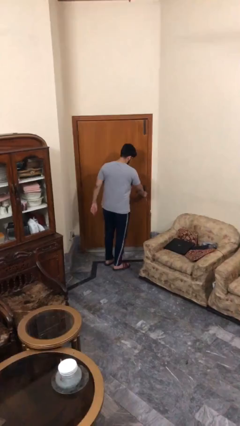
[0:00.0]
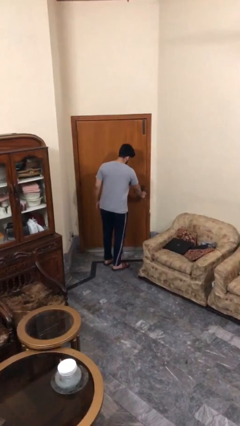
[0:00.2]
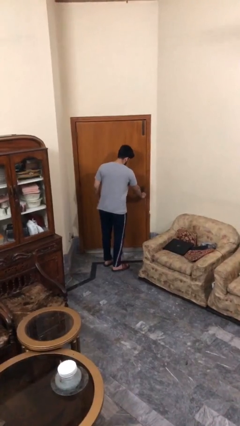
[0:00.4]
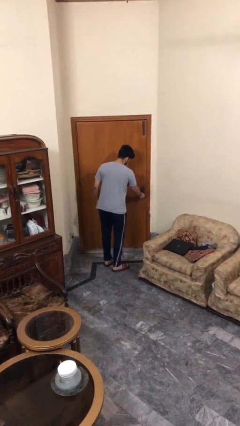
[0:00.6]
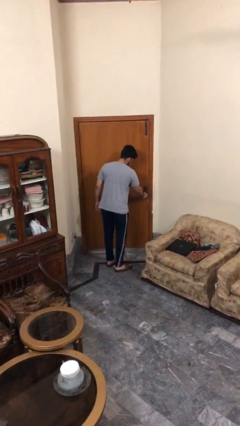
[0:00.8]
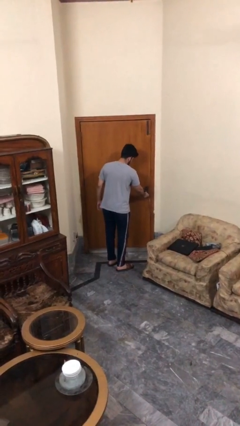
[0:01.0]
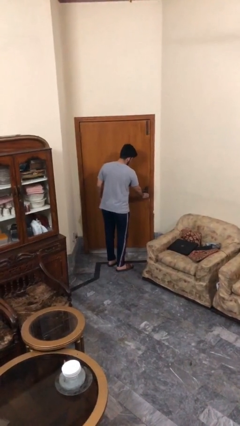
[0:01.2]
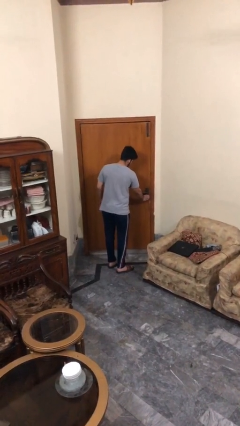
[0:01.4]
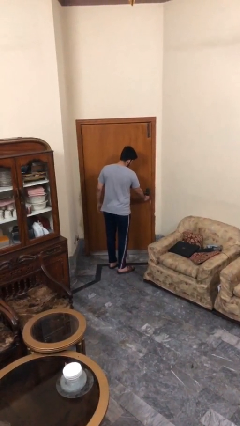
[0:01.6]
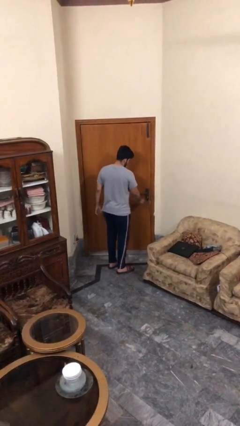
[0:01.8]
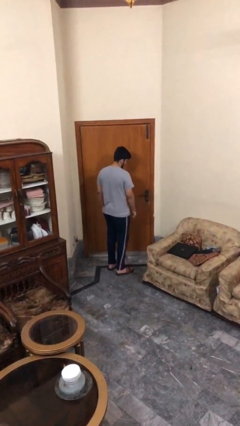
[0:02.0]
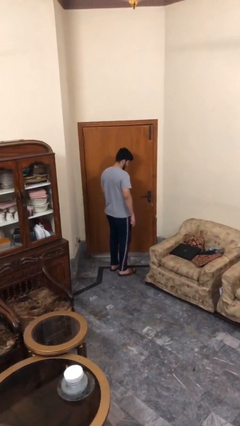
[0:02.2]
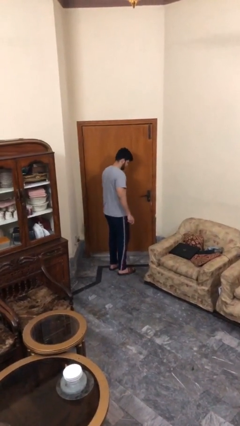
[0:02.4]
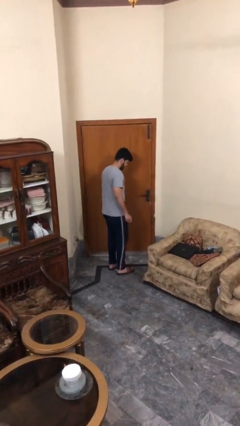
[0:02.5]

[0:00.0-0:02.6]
person locks door with keys

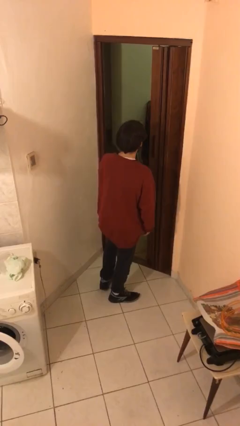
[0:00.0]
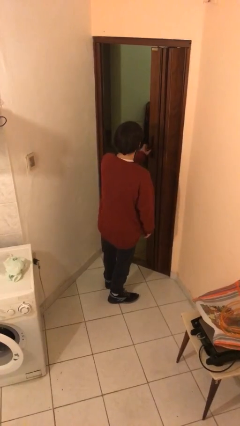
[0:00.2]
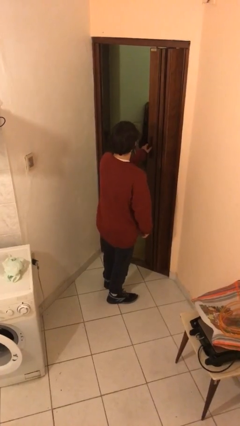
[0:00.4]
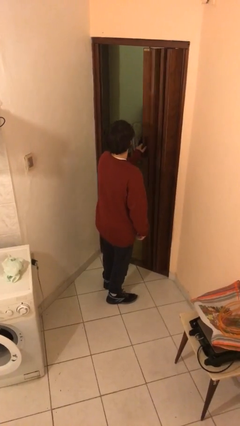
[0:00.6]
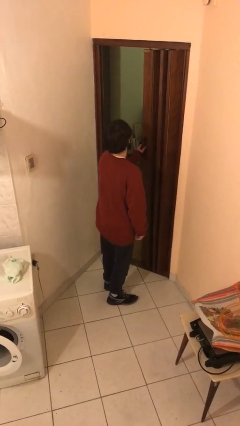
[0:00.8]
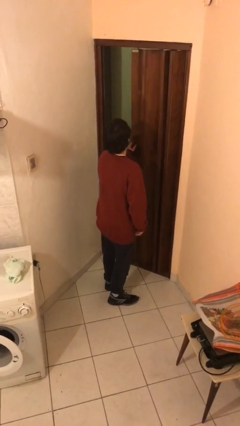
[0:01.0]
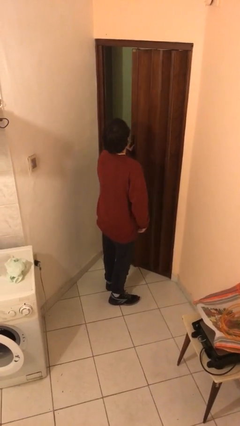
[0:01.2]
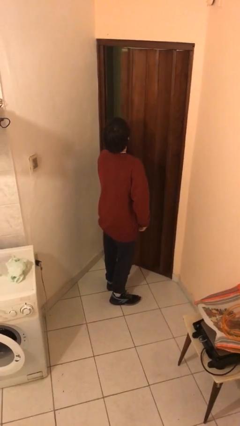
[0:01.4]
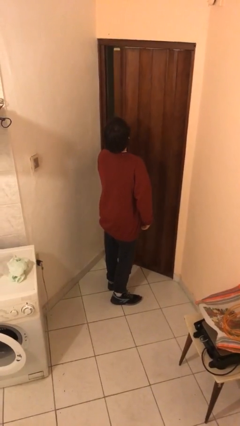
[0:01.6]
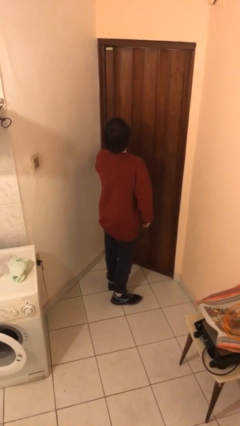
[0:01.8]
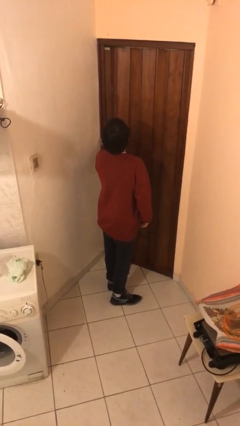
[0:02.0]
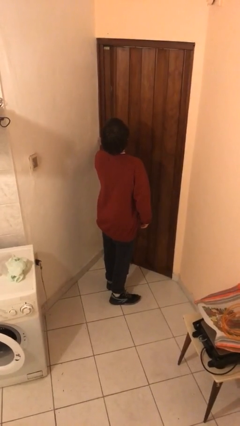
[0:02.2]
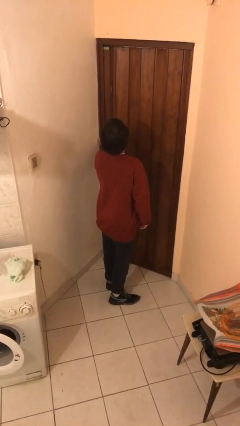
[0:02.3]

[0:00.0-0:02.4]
person closes sliding door

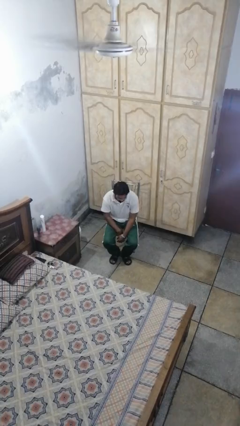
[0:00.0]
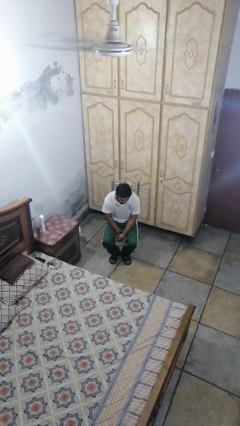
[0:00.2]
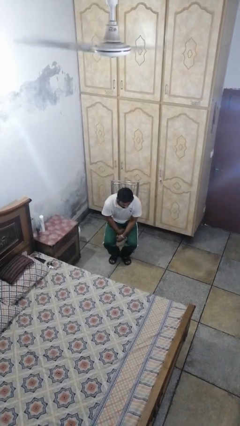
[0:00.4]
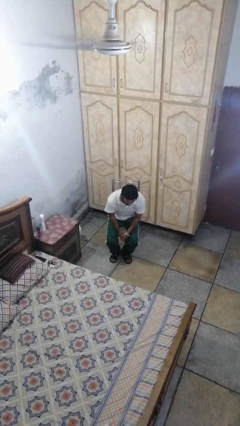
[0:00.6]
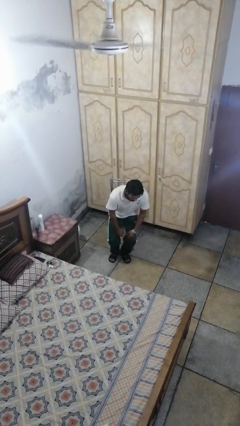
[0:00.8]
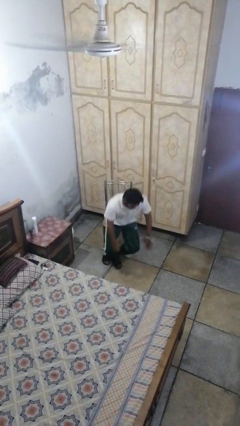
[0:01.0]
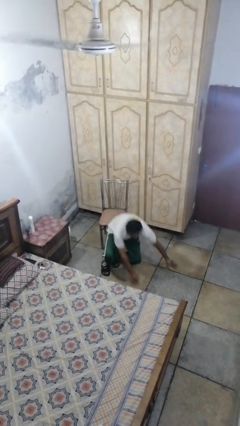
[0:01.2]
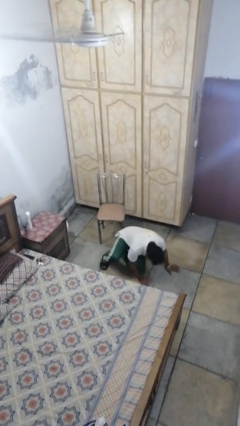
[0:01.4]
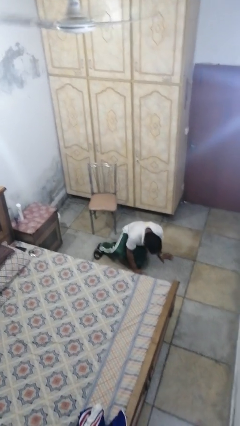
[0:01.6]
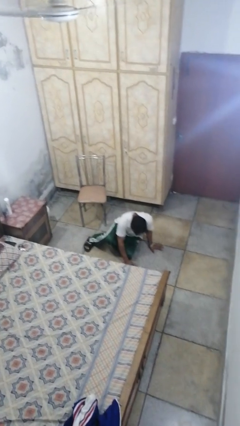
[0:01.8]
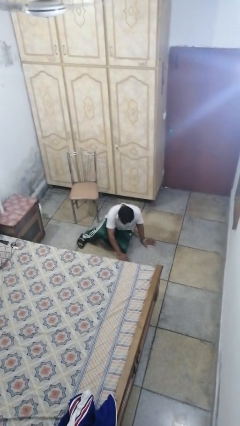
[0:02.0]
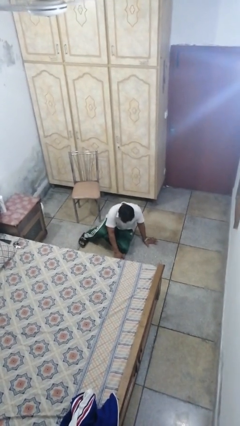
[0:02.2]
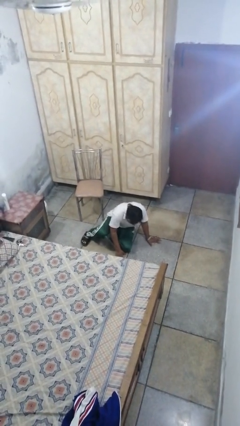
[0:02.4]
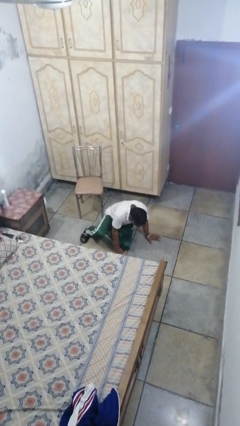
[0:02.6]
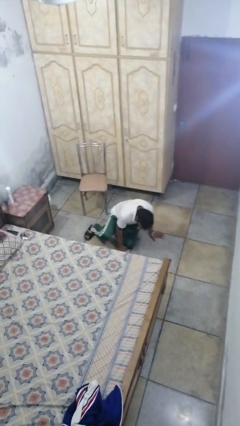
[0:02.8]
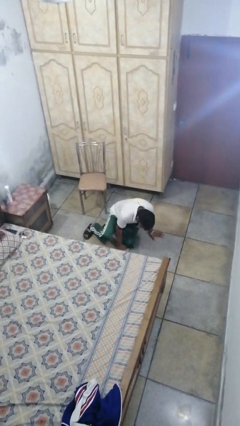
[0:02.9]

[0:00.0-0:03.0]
person falls from chair

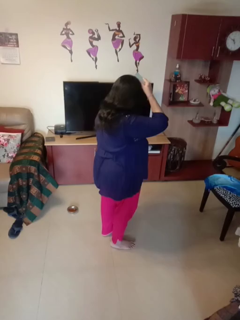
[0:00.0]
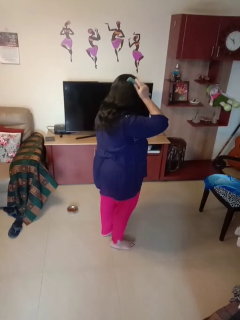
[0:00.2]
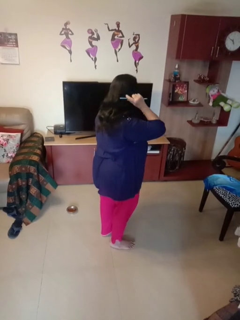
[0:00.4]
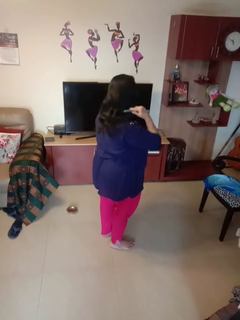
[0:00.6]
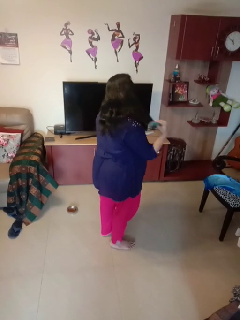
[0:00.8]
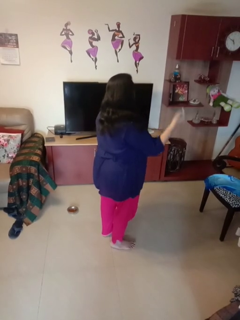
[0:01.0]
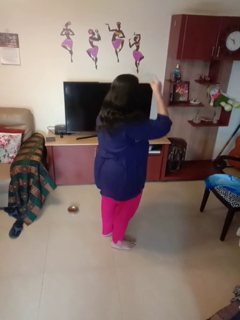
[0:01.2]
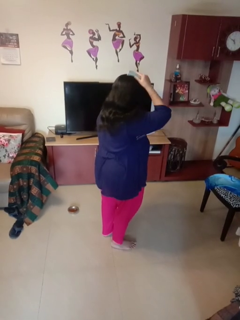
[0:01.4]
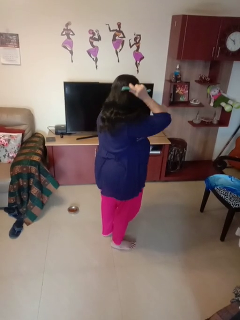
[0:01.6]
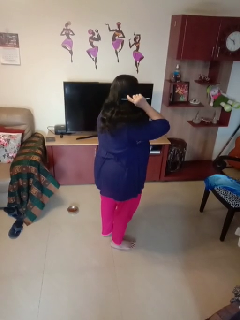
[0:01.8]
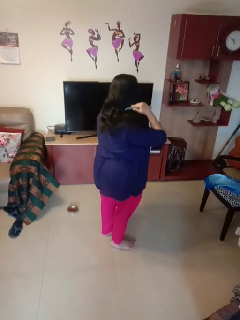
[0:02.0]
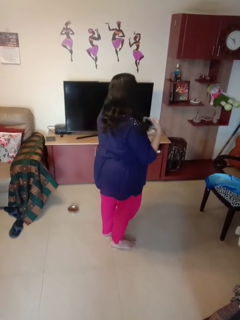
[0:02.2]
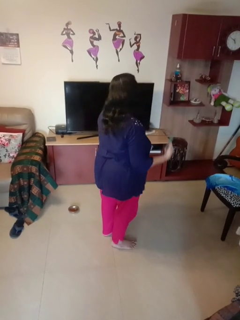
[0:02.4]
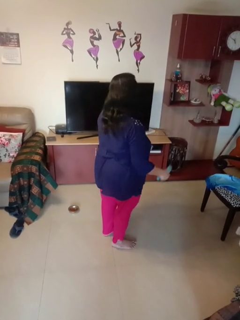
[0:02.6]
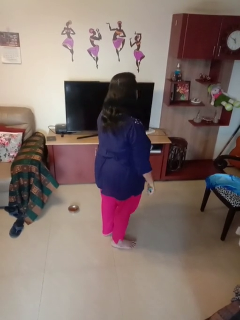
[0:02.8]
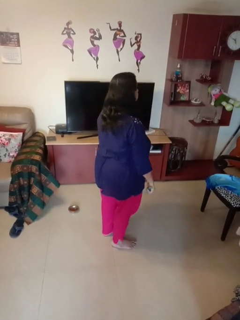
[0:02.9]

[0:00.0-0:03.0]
person brushes hair

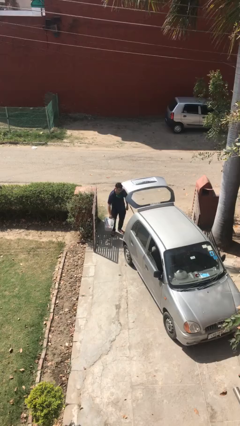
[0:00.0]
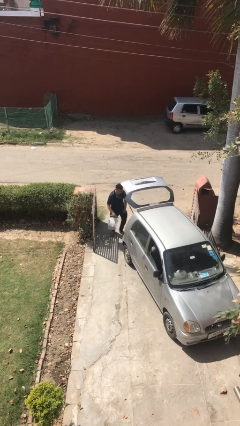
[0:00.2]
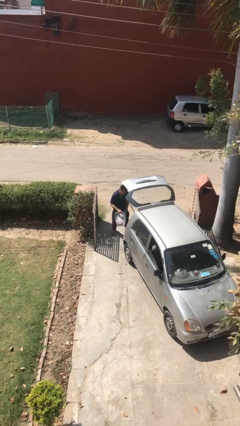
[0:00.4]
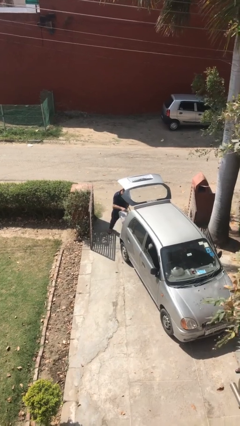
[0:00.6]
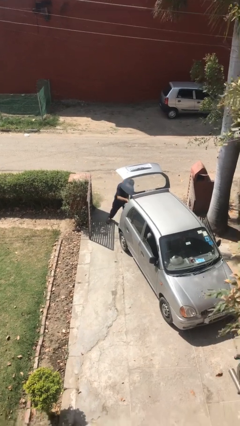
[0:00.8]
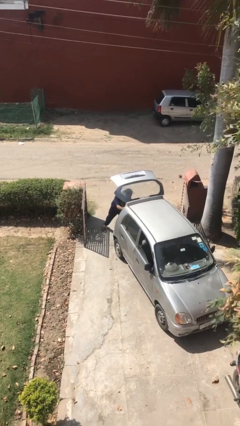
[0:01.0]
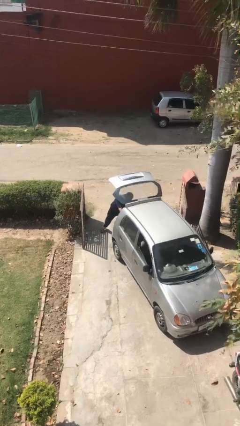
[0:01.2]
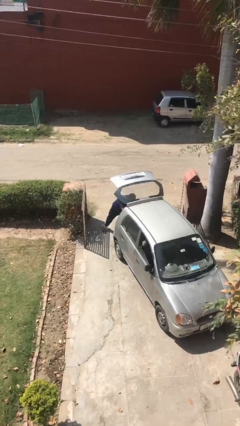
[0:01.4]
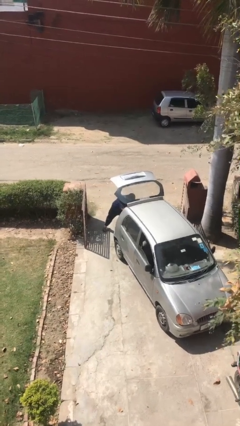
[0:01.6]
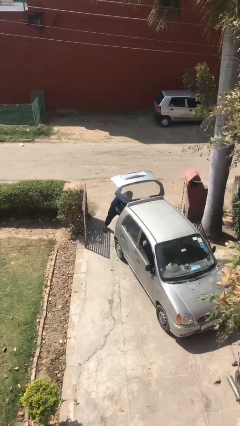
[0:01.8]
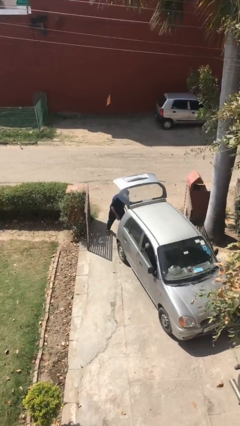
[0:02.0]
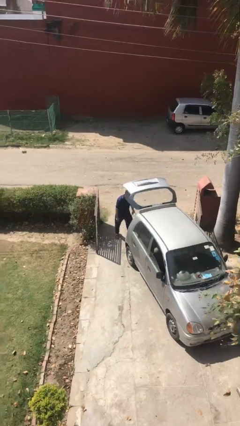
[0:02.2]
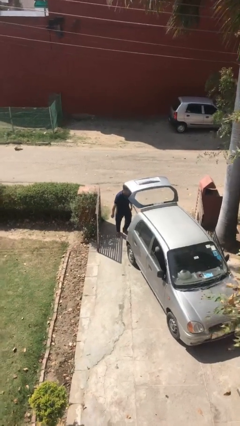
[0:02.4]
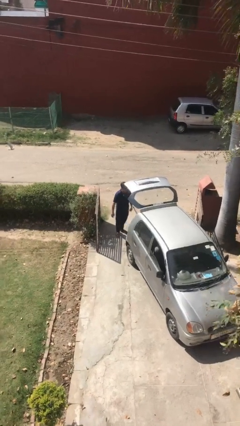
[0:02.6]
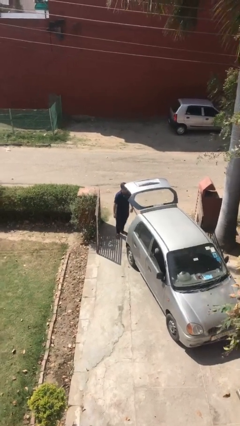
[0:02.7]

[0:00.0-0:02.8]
person loads car

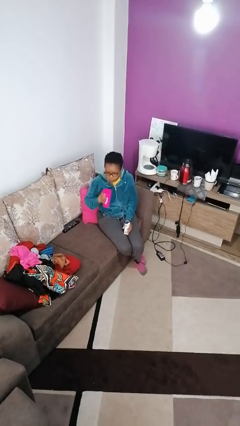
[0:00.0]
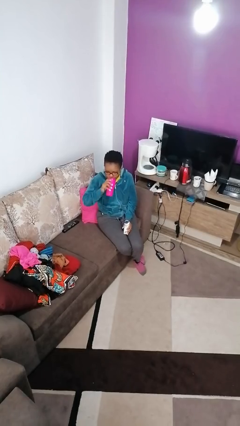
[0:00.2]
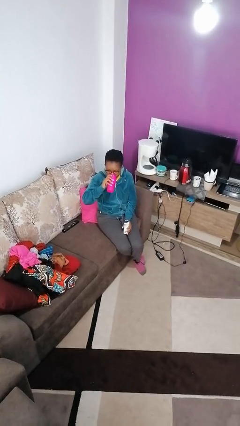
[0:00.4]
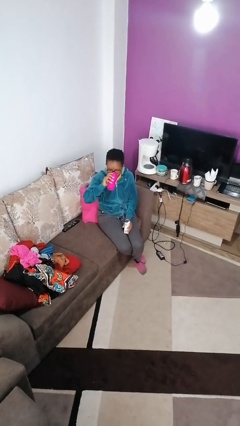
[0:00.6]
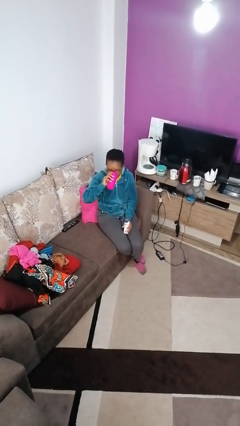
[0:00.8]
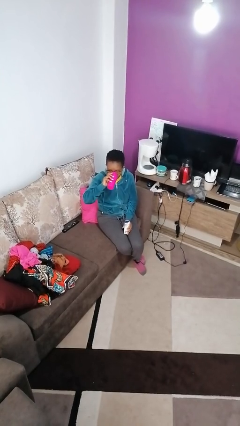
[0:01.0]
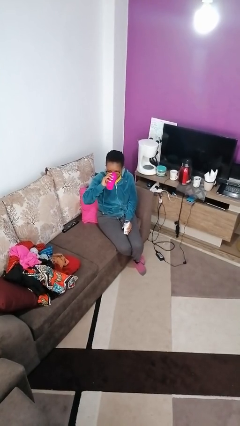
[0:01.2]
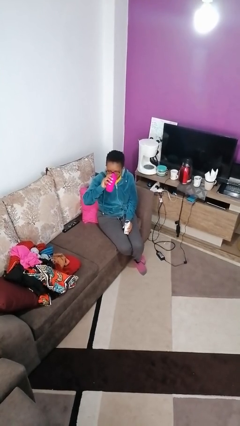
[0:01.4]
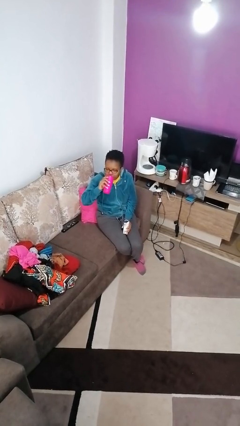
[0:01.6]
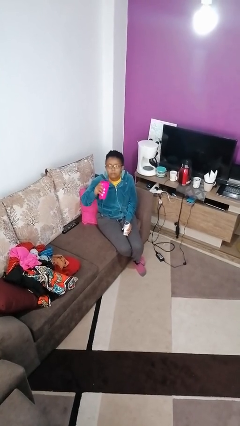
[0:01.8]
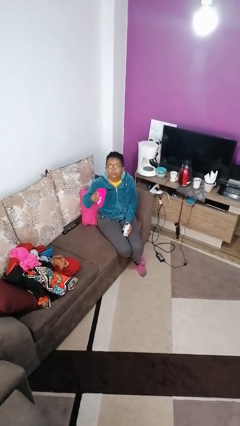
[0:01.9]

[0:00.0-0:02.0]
person drinks from cup

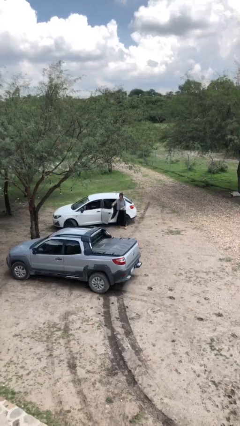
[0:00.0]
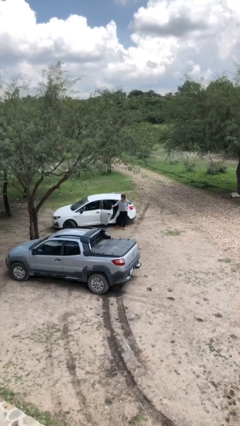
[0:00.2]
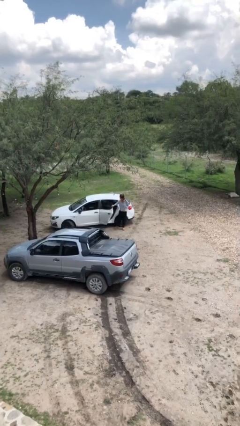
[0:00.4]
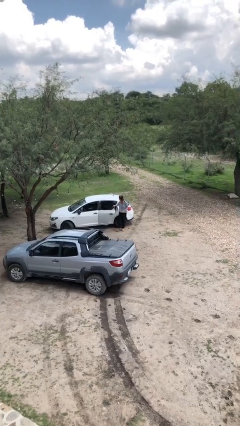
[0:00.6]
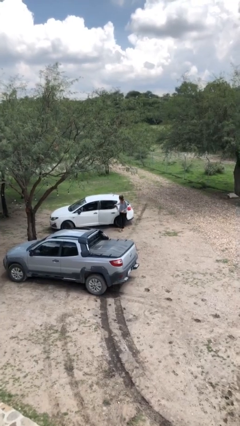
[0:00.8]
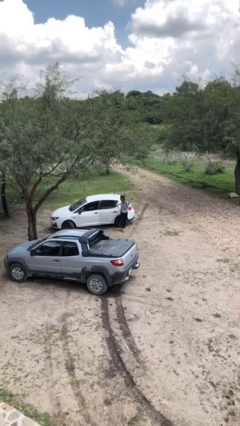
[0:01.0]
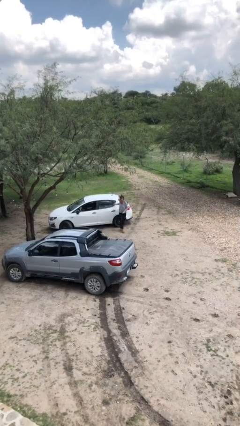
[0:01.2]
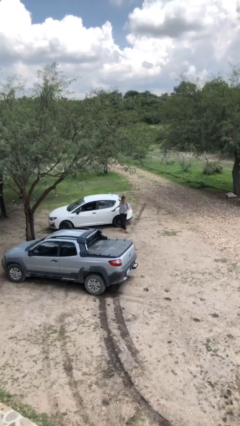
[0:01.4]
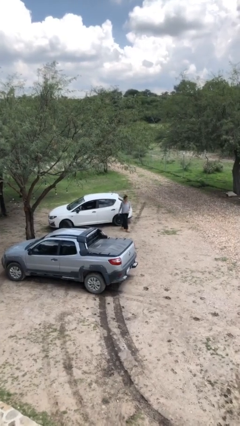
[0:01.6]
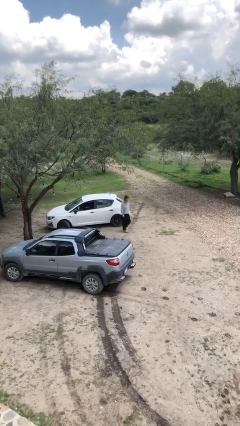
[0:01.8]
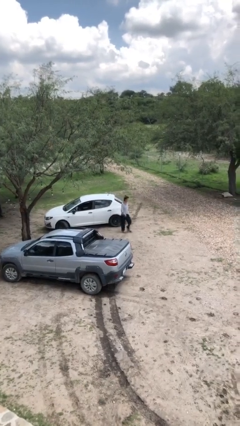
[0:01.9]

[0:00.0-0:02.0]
person closes car door

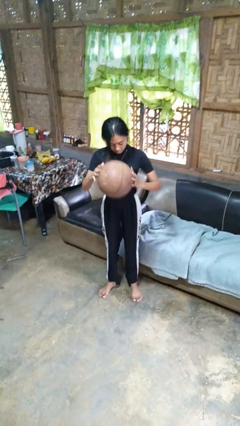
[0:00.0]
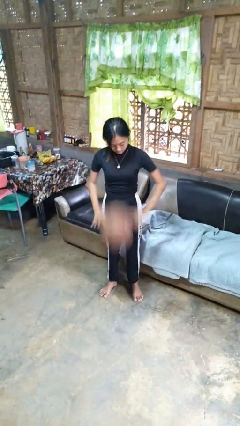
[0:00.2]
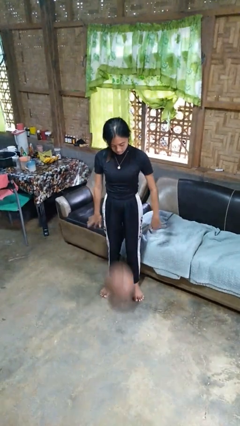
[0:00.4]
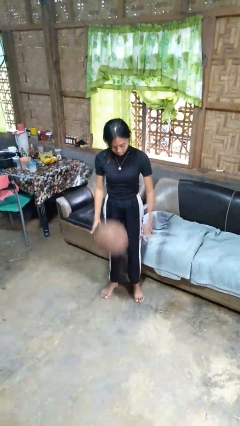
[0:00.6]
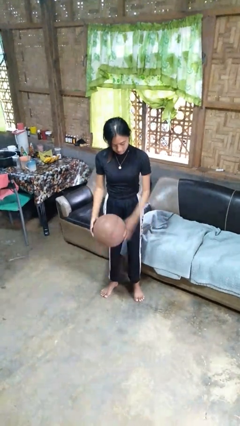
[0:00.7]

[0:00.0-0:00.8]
person bounces ball on floor
